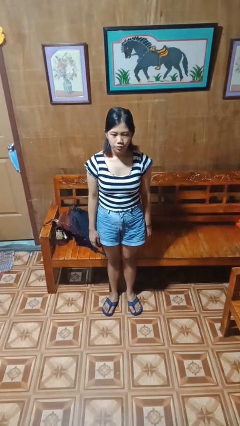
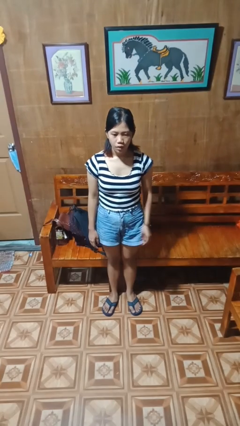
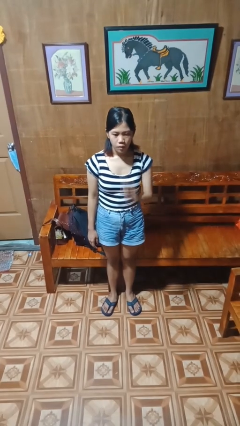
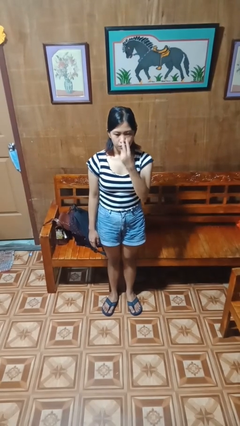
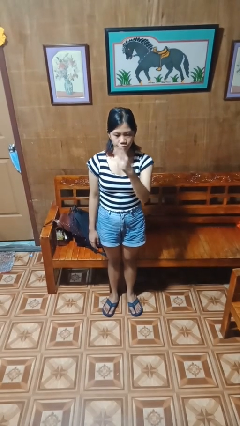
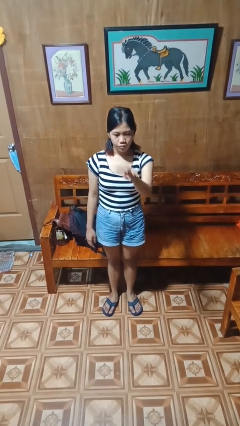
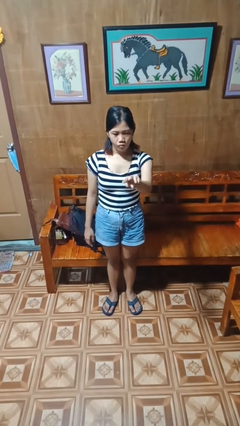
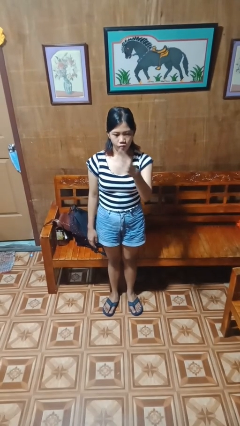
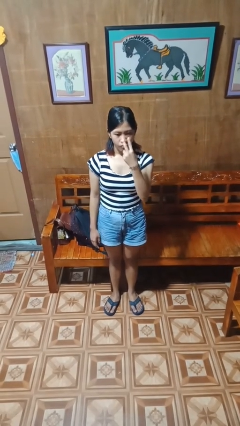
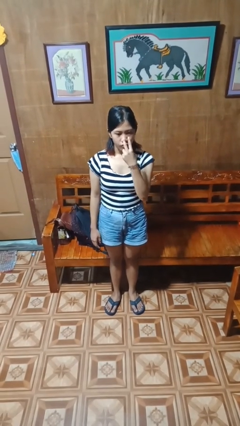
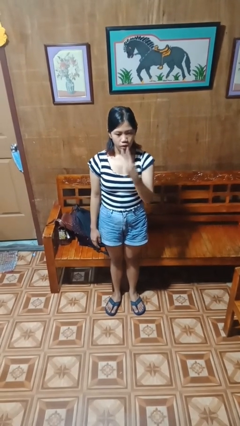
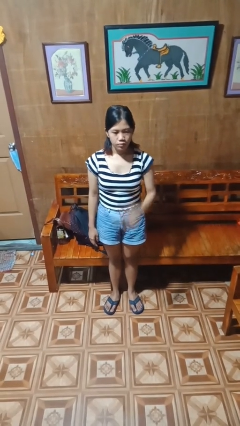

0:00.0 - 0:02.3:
person gestures watch closely

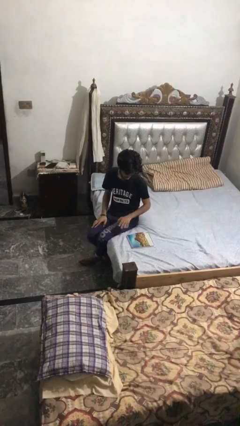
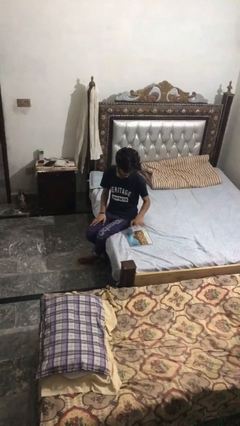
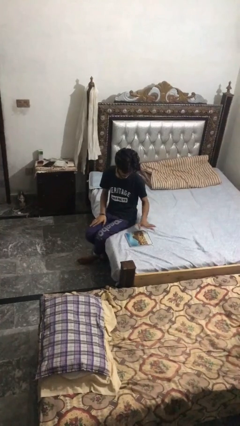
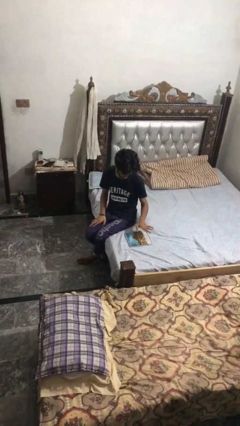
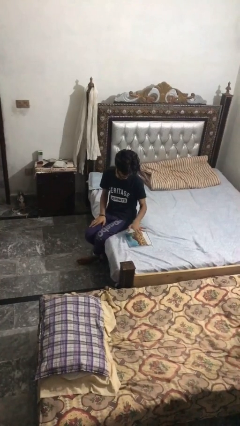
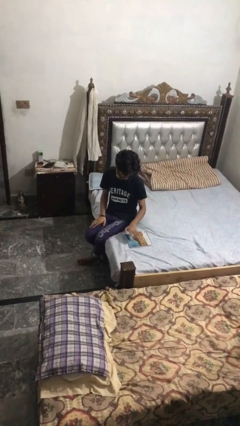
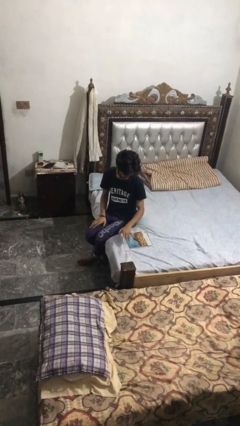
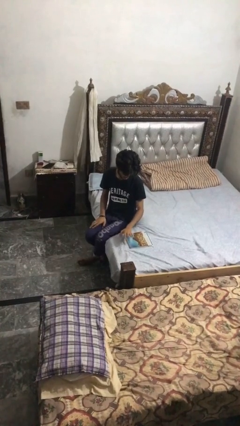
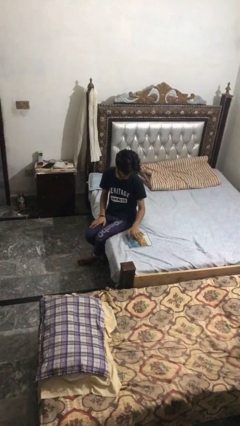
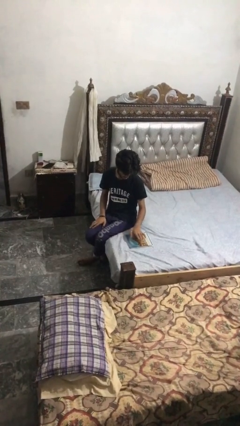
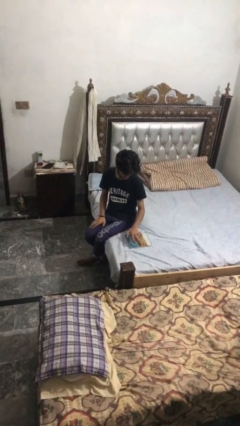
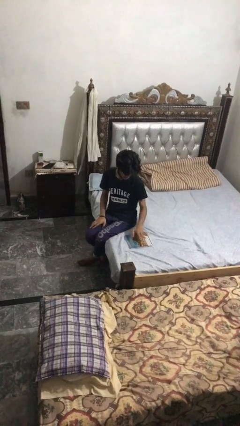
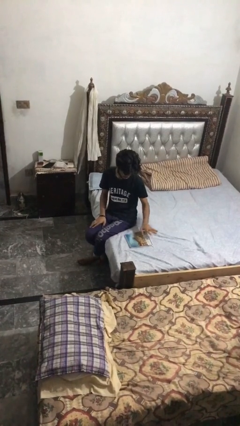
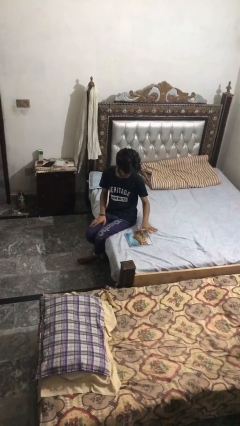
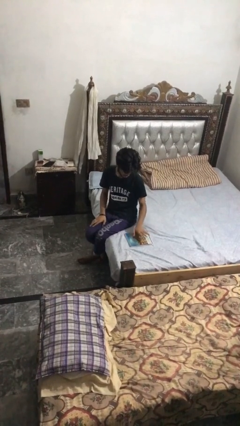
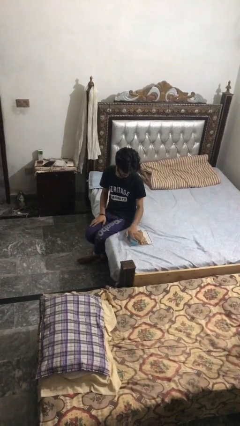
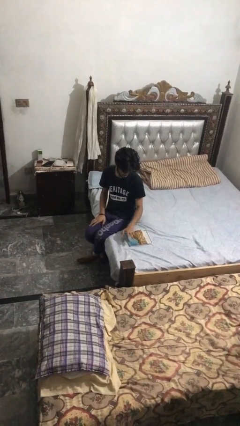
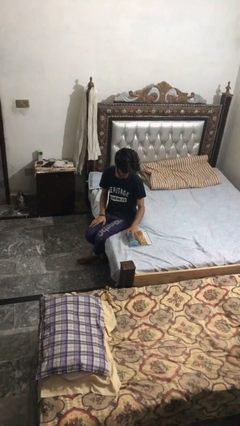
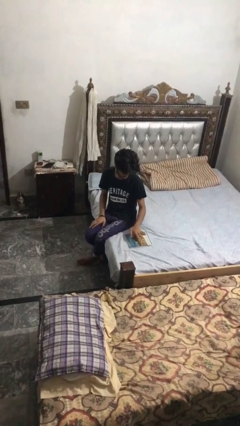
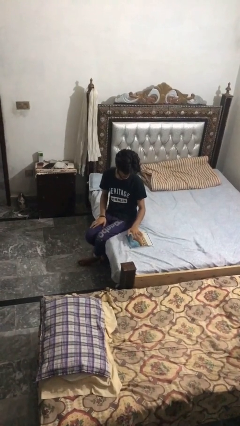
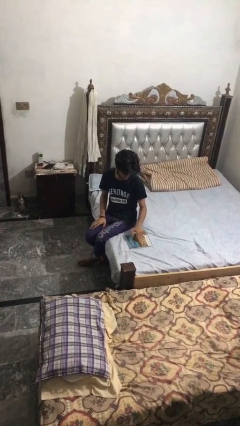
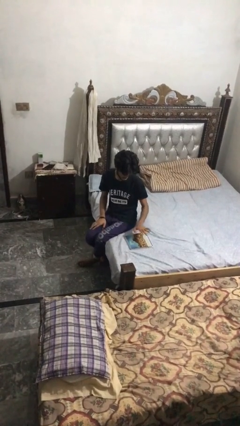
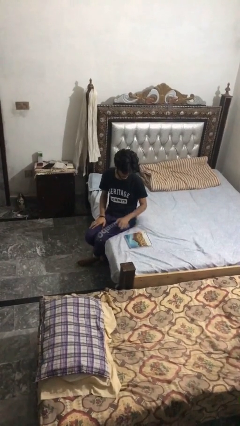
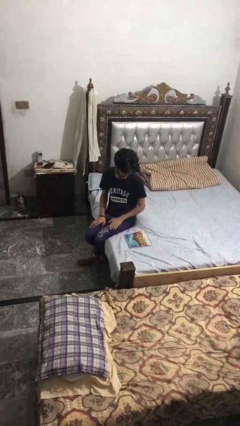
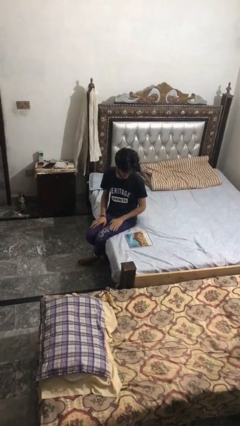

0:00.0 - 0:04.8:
person waves hand over object

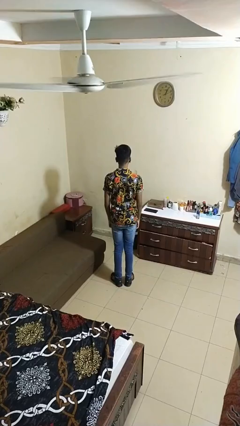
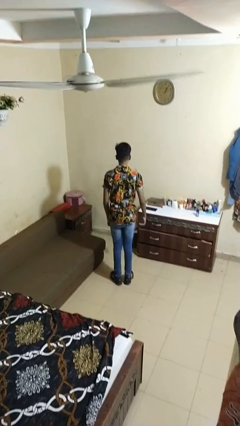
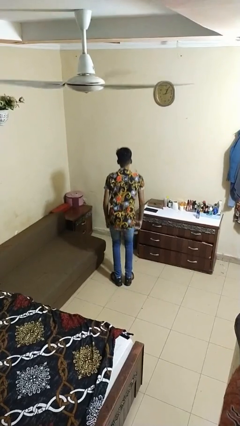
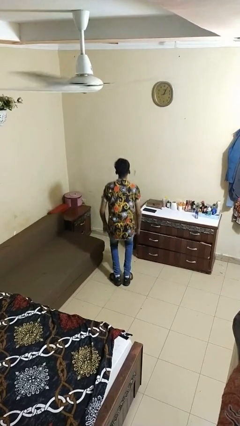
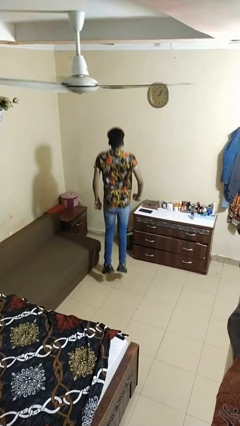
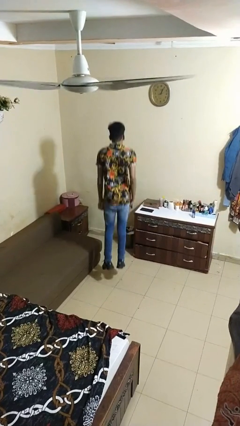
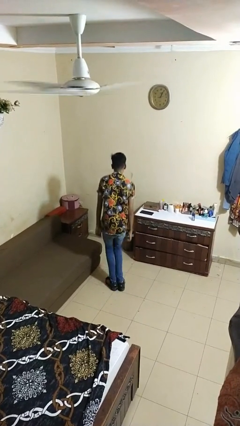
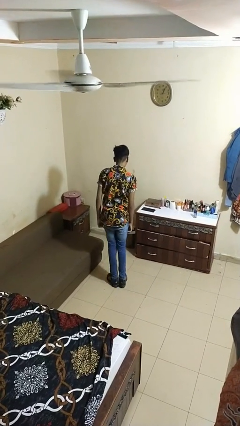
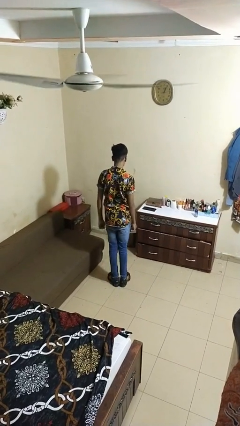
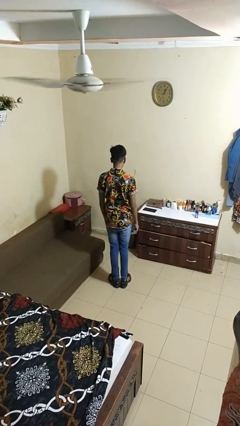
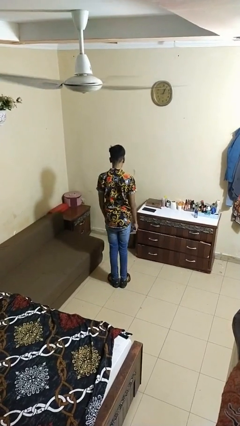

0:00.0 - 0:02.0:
person jumps

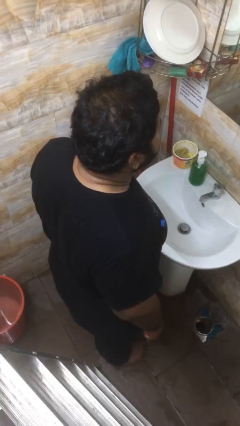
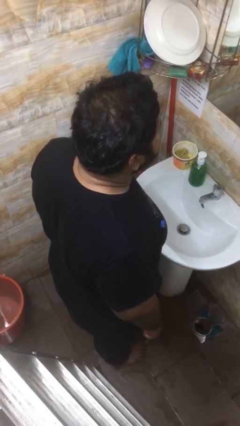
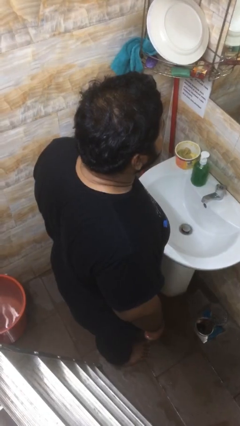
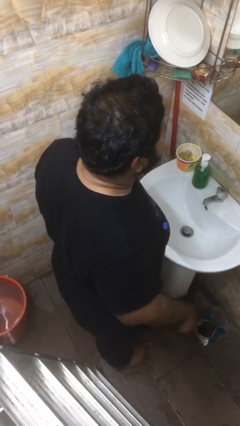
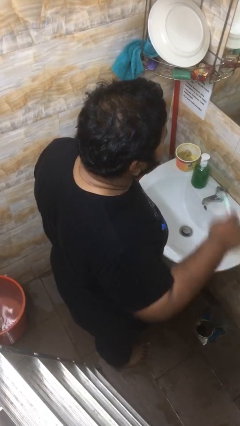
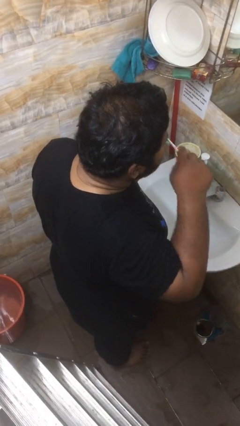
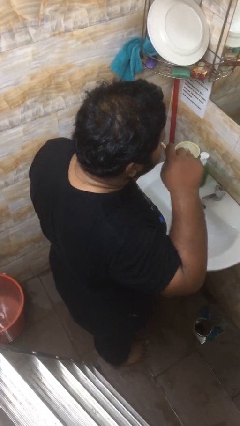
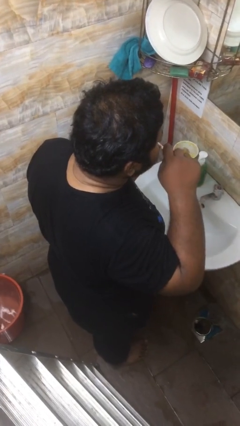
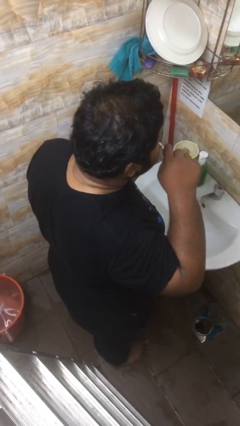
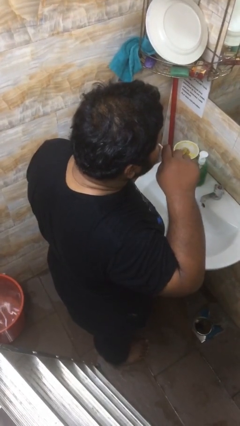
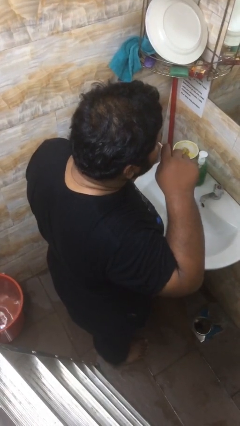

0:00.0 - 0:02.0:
person brushes teeth

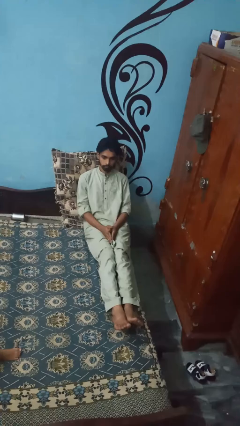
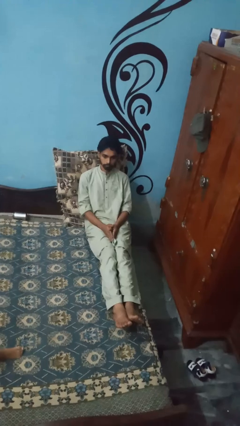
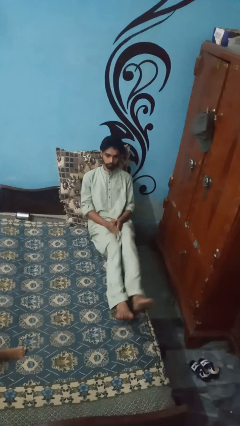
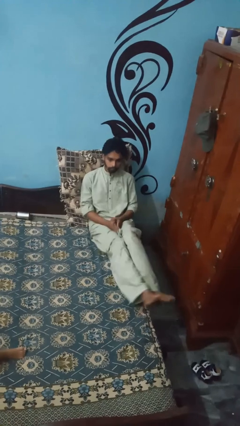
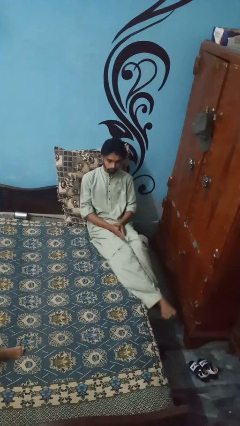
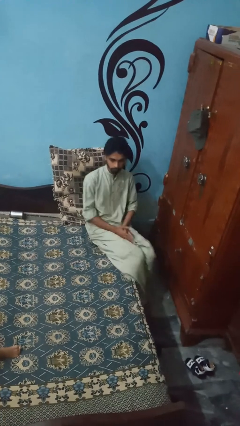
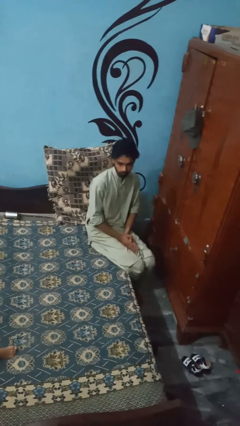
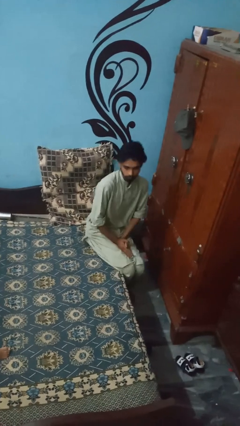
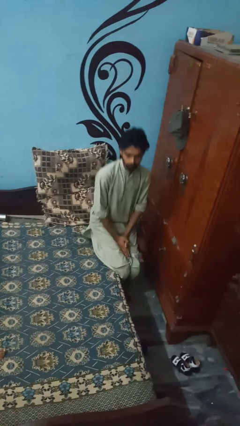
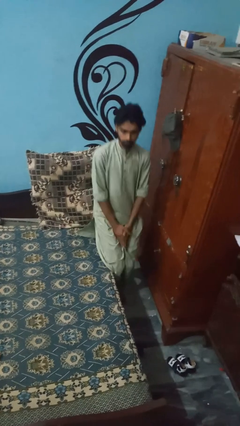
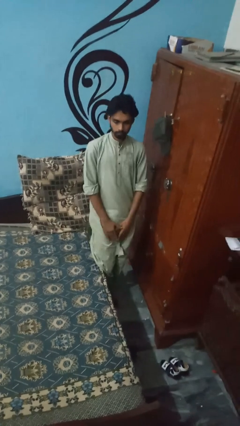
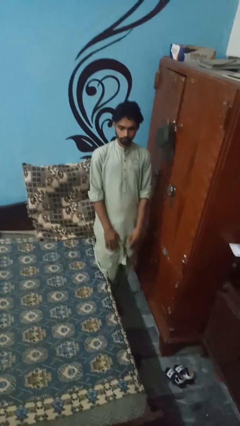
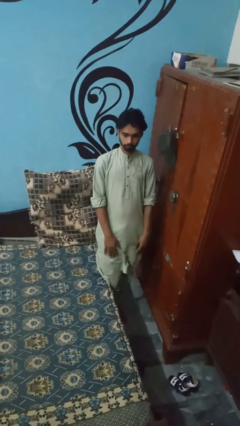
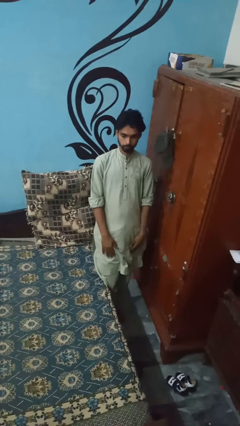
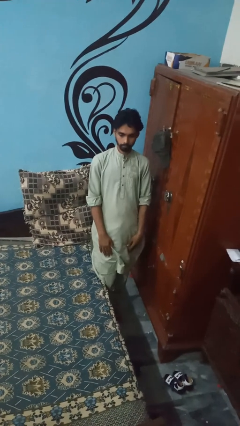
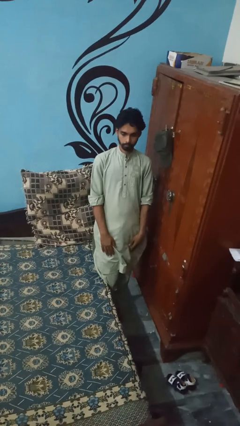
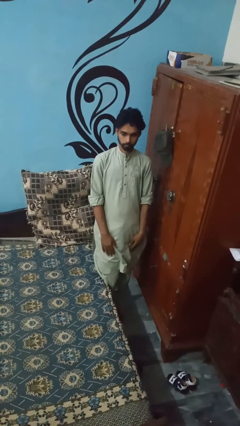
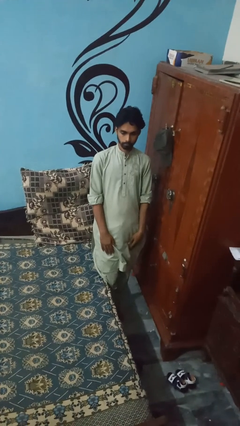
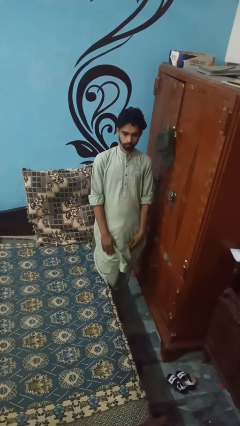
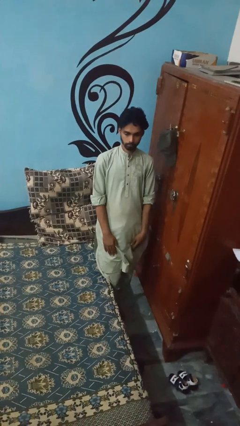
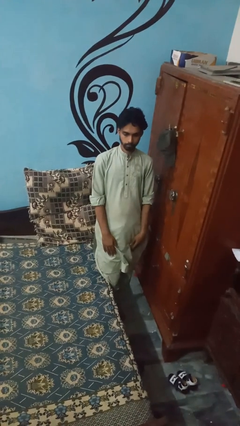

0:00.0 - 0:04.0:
person stands up

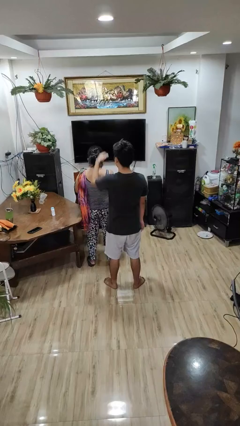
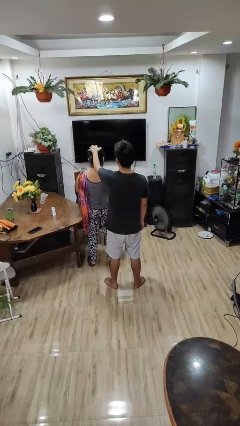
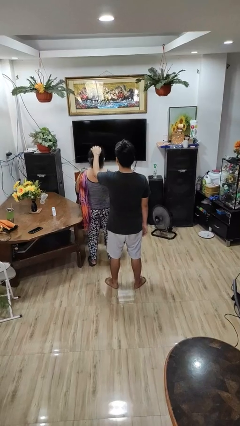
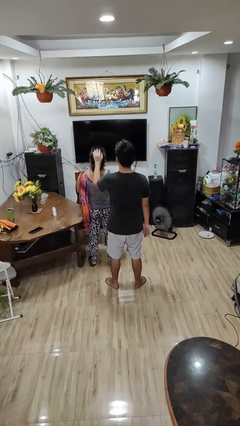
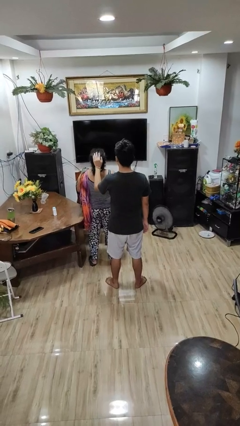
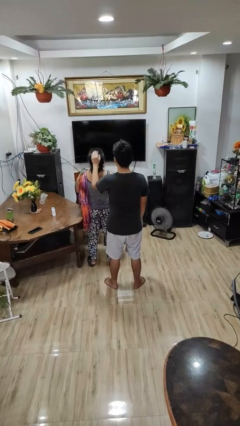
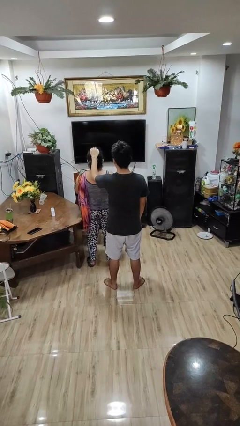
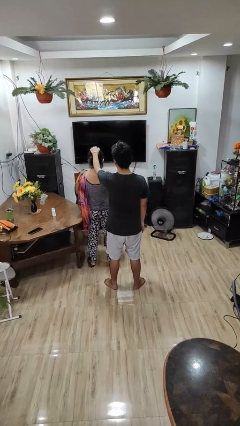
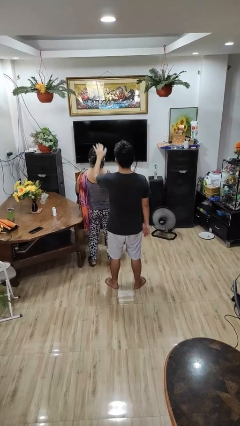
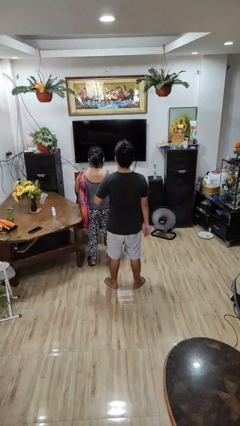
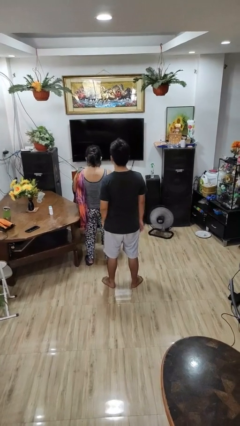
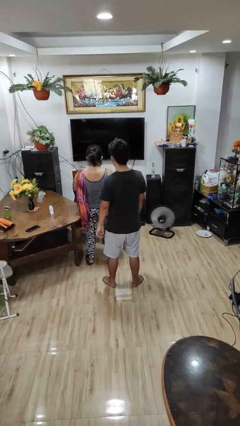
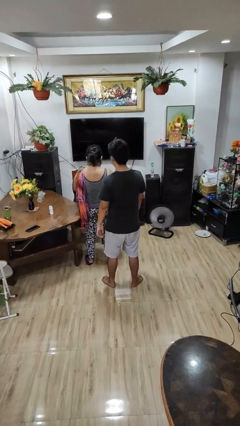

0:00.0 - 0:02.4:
person grabs person by hair
